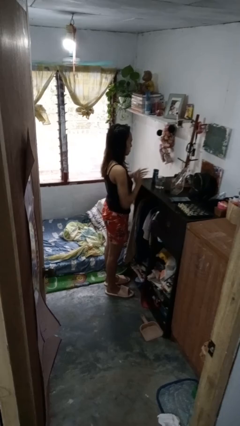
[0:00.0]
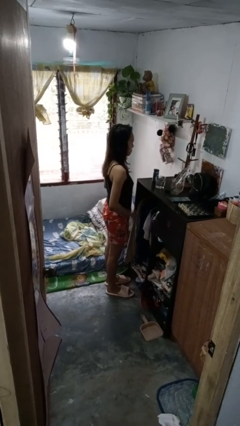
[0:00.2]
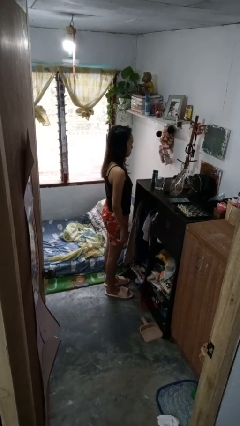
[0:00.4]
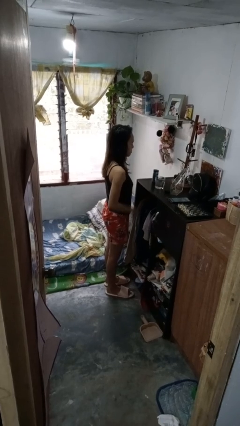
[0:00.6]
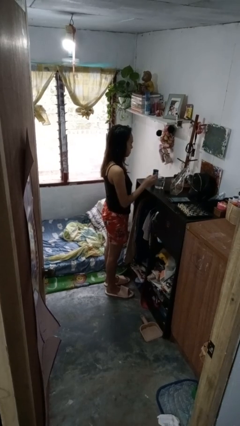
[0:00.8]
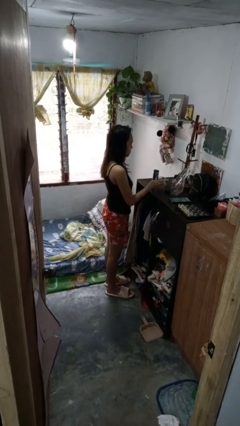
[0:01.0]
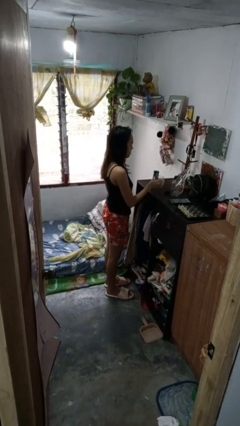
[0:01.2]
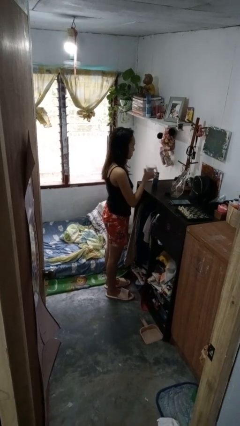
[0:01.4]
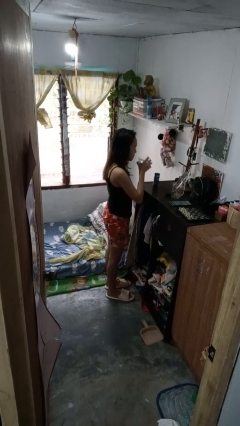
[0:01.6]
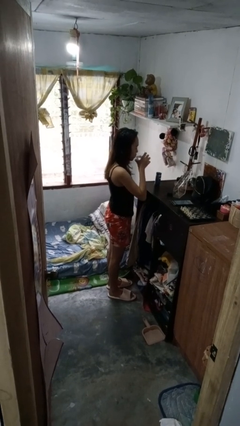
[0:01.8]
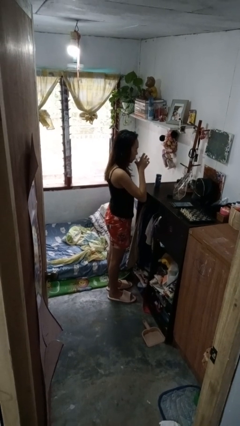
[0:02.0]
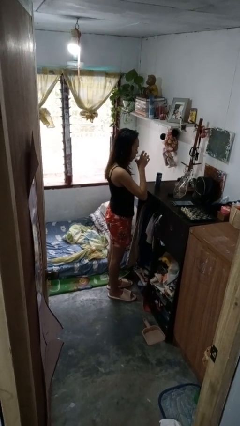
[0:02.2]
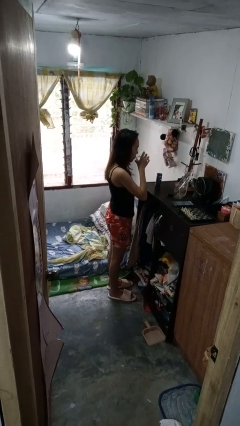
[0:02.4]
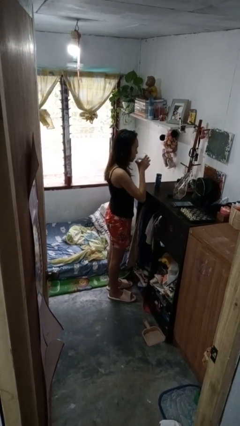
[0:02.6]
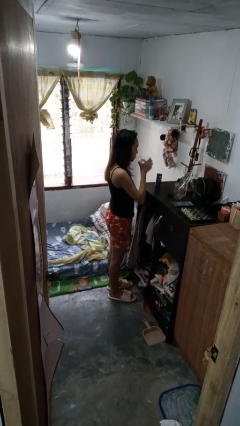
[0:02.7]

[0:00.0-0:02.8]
person drinks from cup

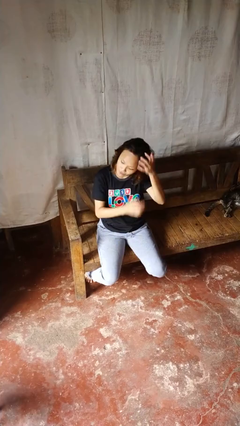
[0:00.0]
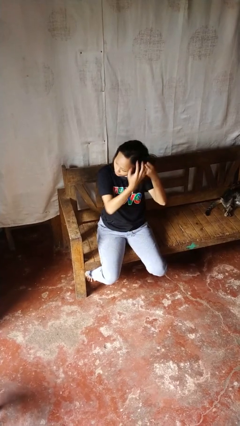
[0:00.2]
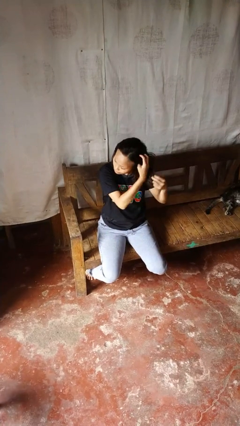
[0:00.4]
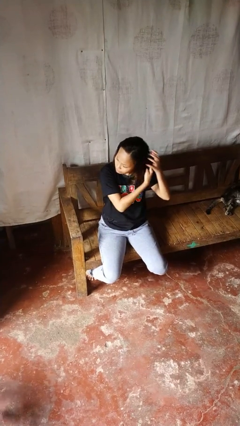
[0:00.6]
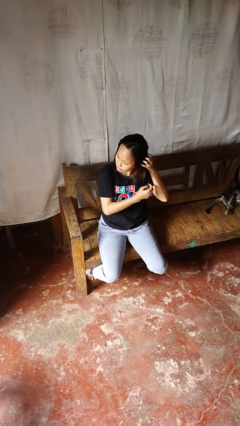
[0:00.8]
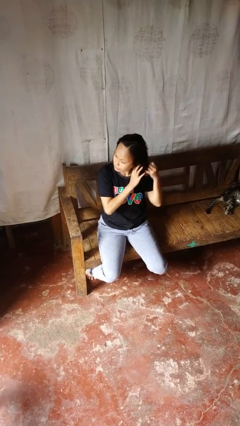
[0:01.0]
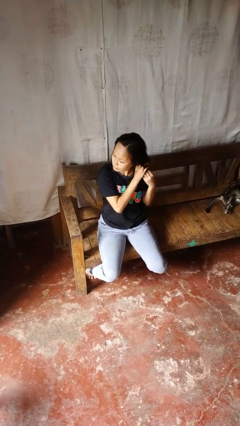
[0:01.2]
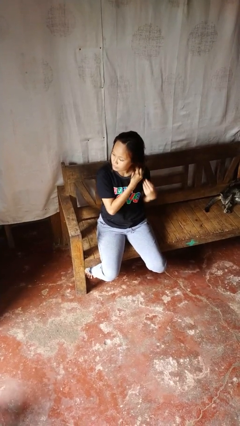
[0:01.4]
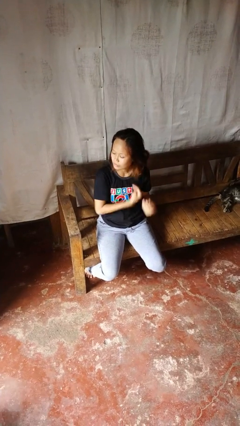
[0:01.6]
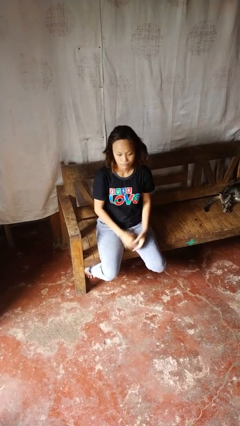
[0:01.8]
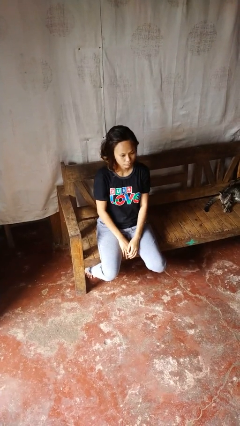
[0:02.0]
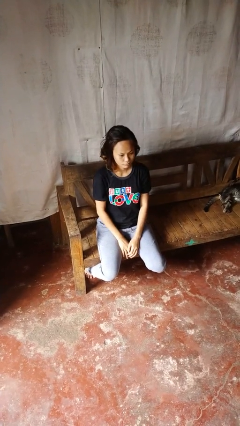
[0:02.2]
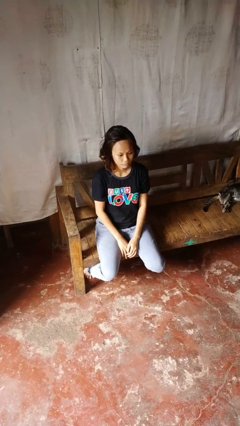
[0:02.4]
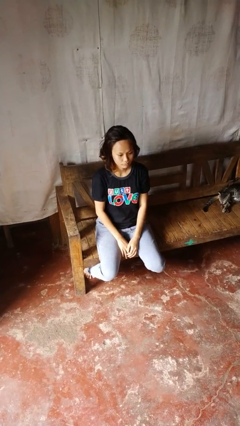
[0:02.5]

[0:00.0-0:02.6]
person strokes hair

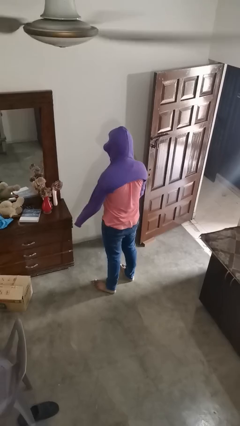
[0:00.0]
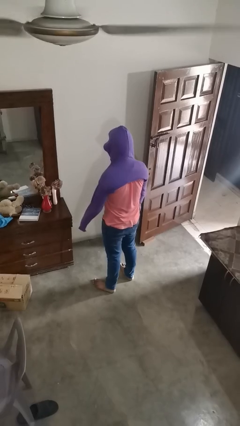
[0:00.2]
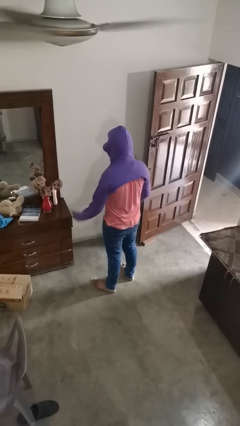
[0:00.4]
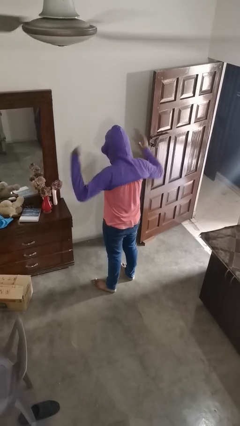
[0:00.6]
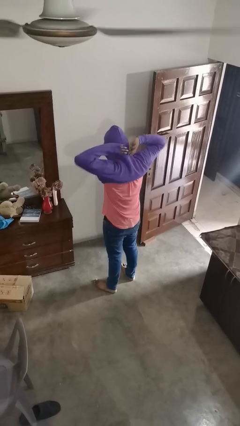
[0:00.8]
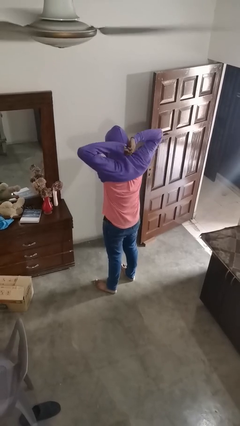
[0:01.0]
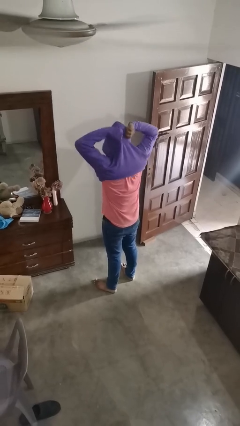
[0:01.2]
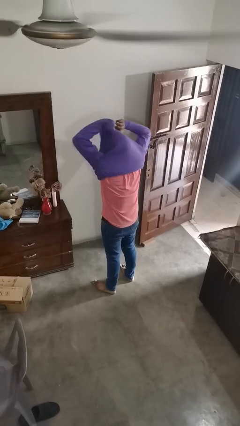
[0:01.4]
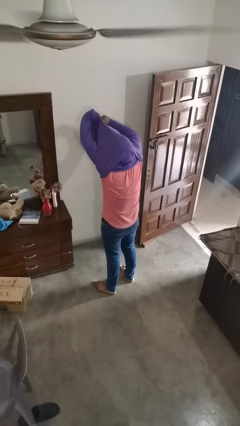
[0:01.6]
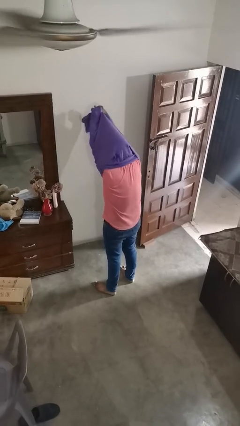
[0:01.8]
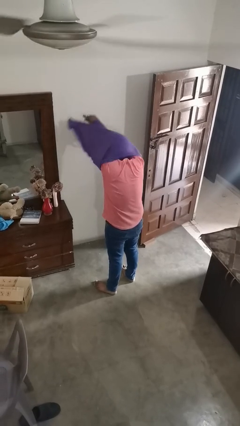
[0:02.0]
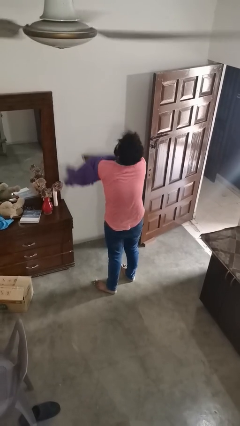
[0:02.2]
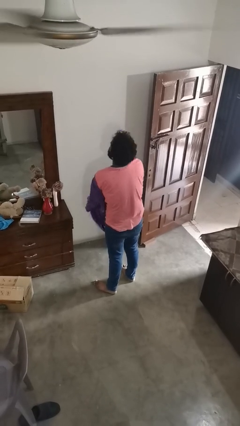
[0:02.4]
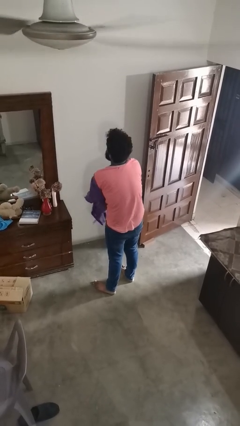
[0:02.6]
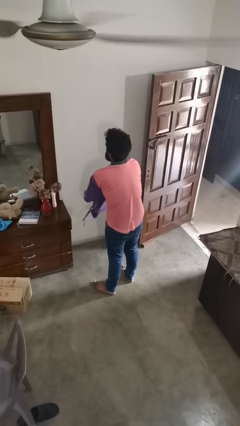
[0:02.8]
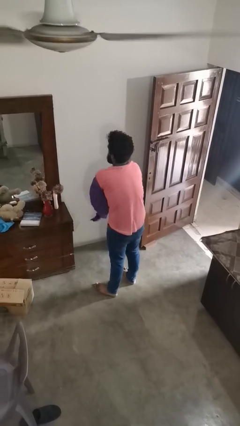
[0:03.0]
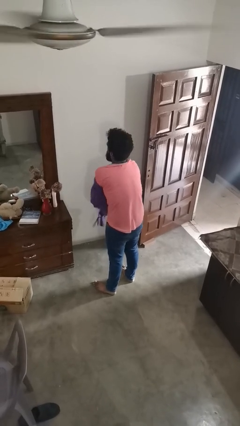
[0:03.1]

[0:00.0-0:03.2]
person takes off hoodie

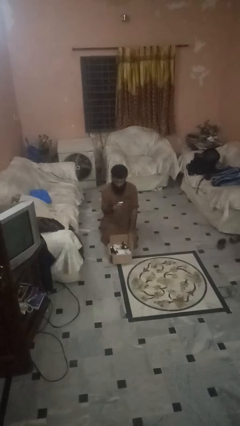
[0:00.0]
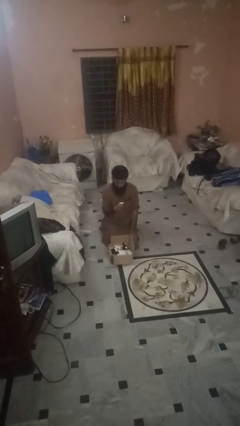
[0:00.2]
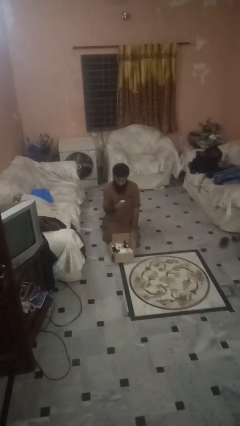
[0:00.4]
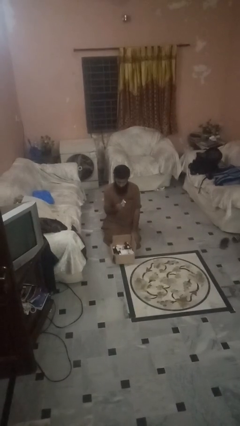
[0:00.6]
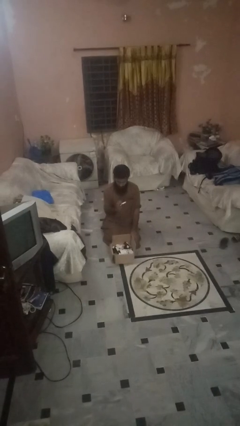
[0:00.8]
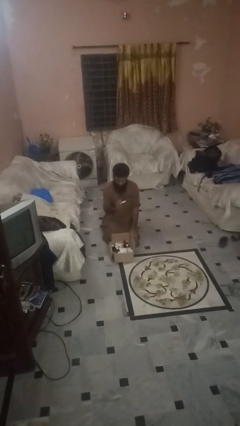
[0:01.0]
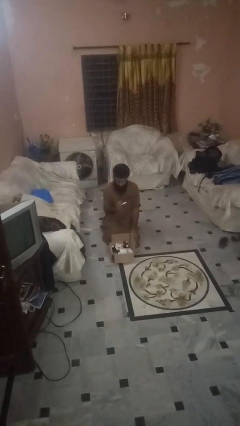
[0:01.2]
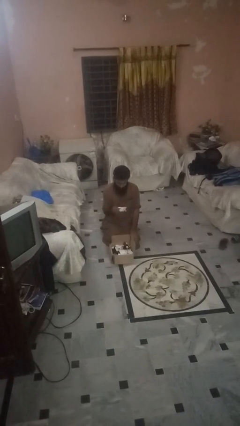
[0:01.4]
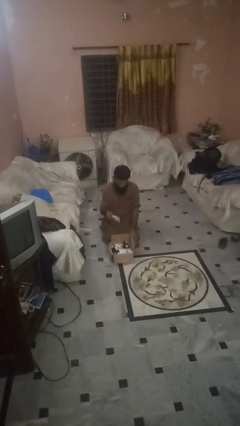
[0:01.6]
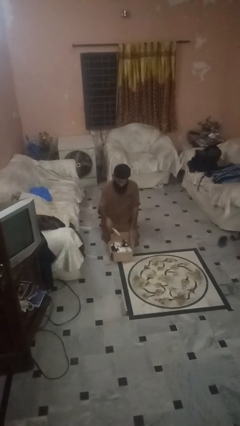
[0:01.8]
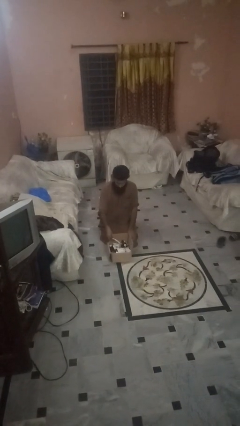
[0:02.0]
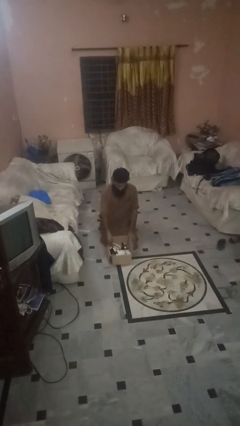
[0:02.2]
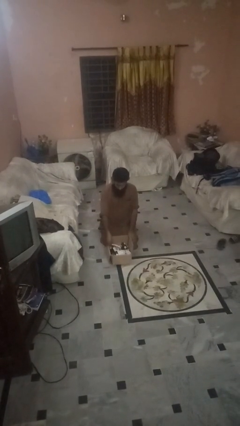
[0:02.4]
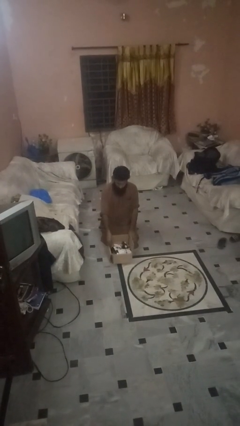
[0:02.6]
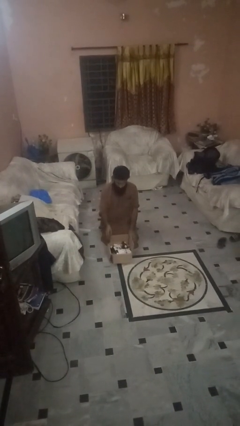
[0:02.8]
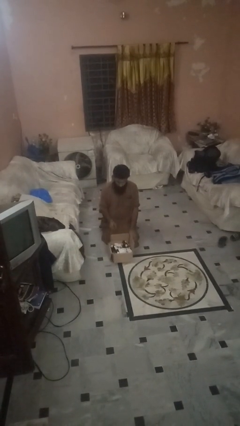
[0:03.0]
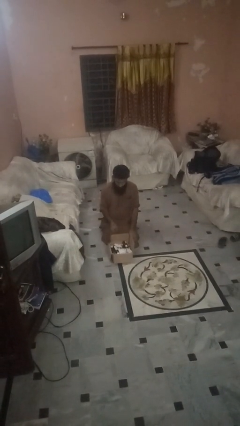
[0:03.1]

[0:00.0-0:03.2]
person puts object into box

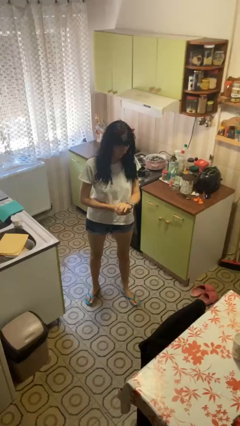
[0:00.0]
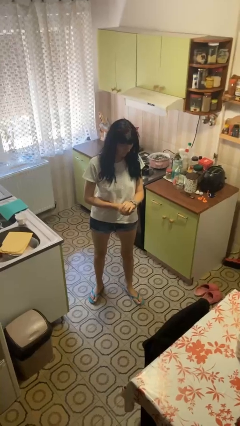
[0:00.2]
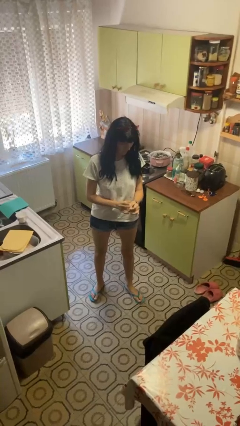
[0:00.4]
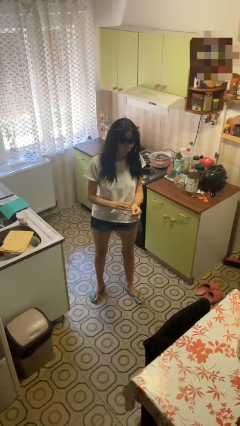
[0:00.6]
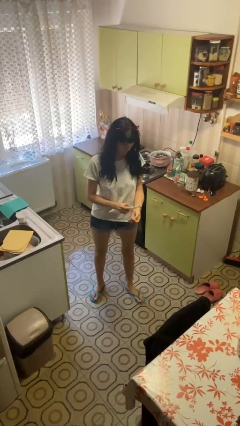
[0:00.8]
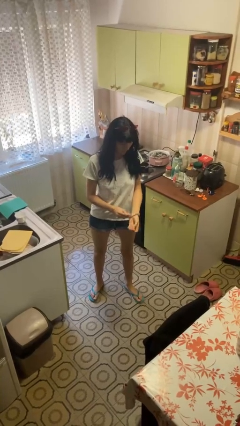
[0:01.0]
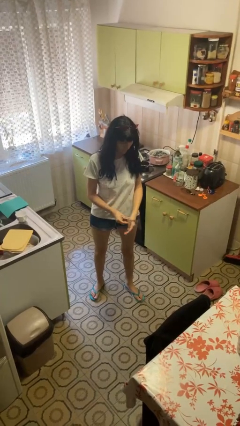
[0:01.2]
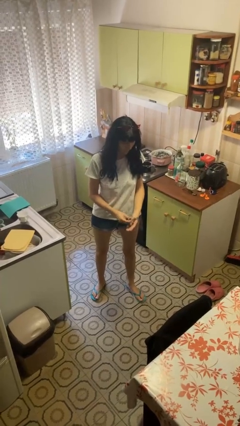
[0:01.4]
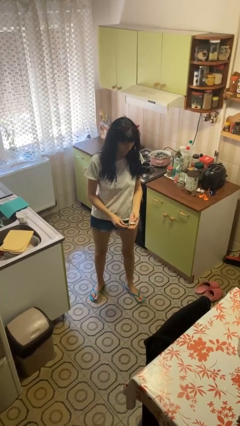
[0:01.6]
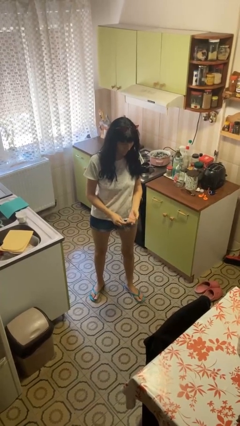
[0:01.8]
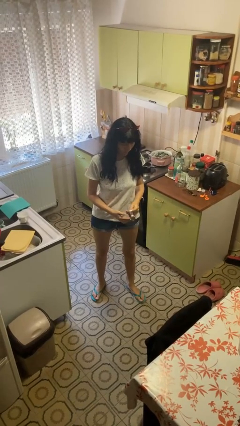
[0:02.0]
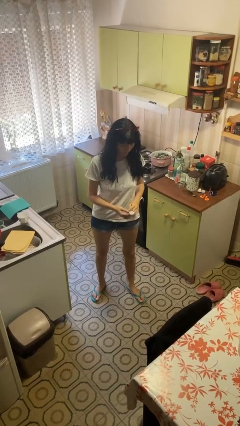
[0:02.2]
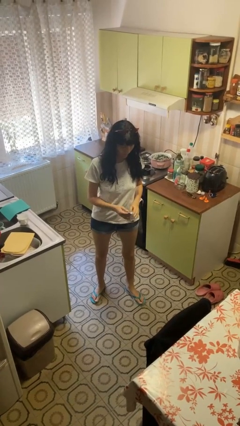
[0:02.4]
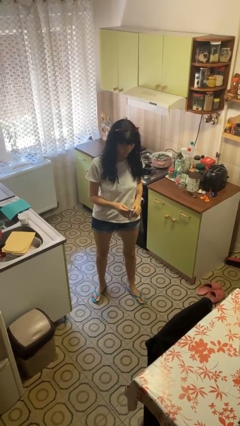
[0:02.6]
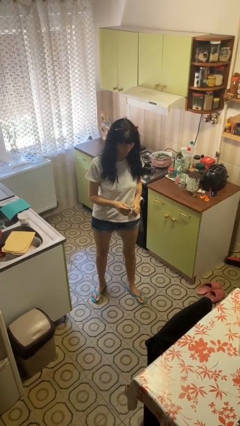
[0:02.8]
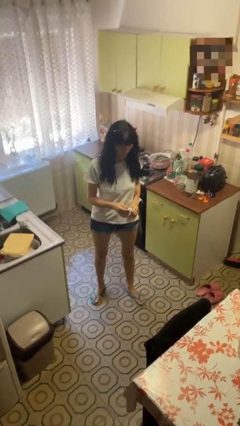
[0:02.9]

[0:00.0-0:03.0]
person takes off wristwatch

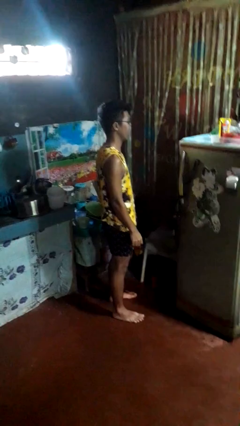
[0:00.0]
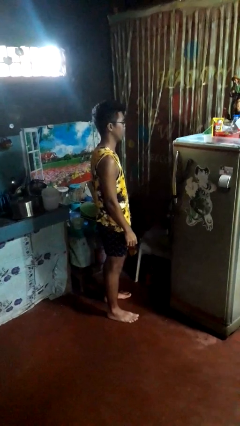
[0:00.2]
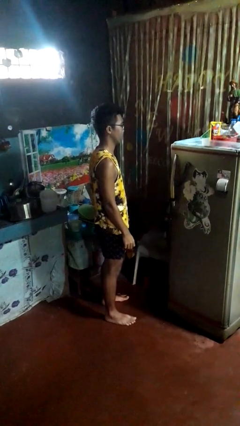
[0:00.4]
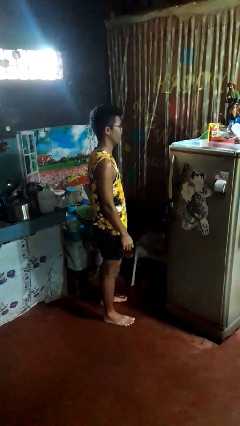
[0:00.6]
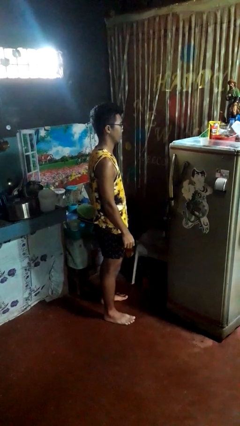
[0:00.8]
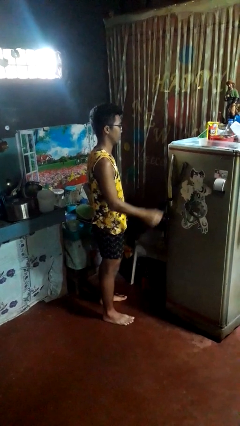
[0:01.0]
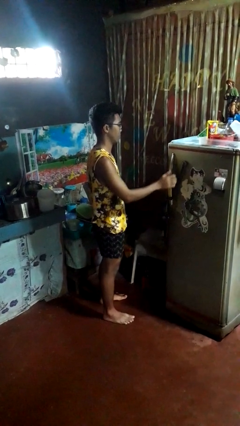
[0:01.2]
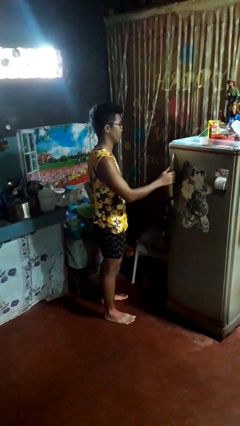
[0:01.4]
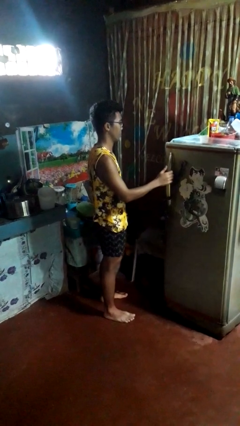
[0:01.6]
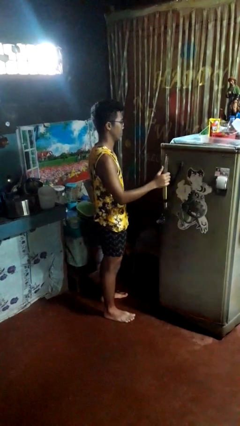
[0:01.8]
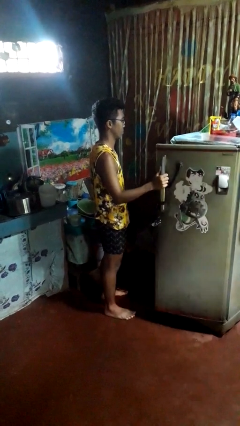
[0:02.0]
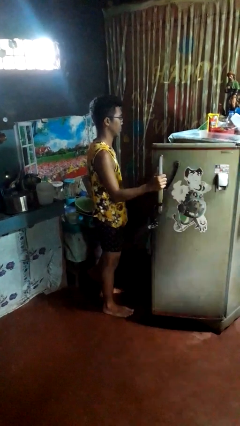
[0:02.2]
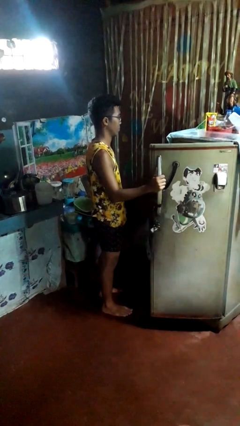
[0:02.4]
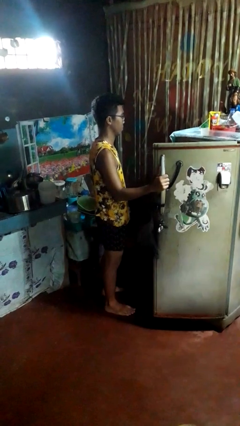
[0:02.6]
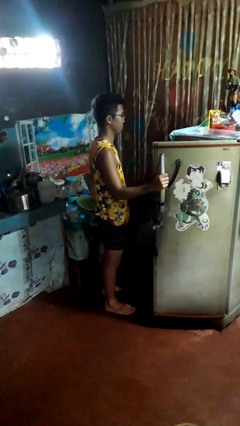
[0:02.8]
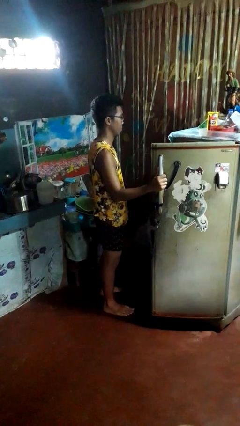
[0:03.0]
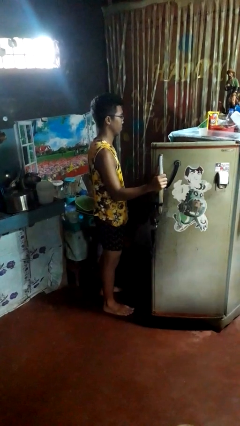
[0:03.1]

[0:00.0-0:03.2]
person opens refrigerator
